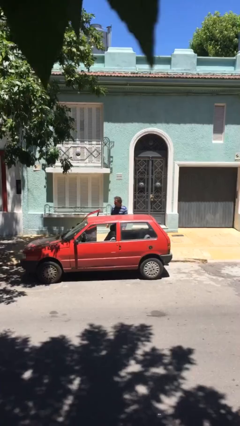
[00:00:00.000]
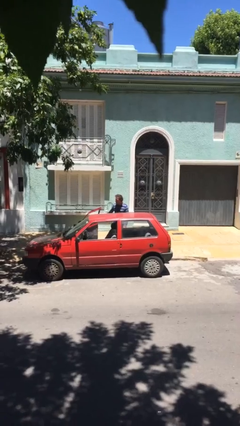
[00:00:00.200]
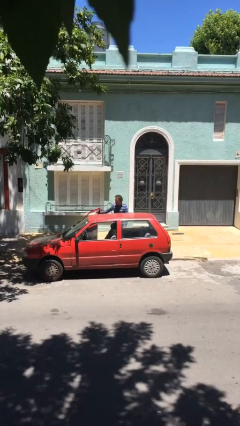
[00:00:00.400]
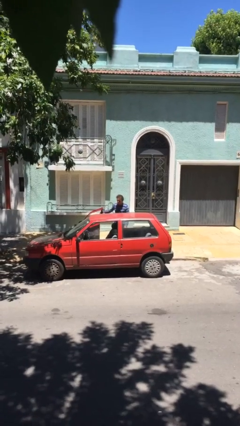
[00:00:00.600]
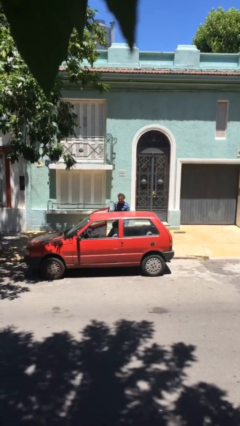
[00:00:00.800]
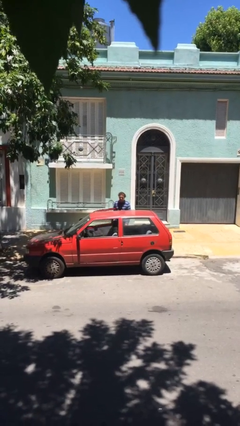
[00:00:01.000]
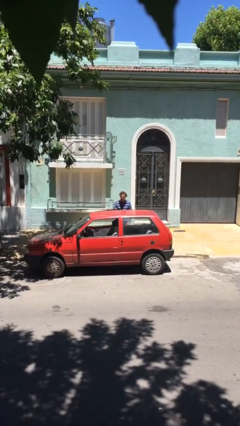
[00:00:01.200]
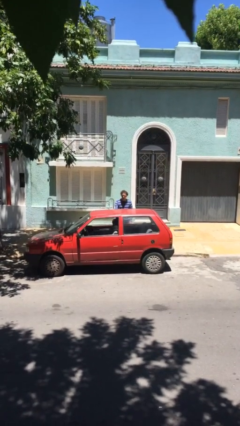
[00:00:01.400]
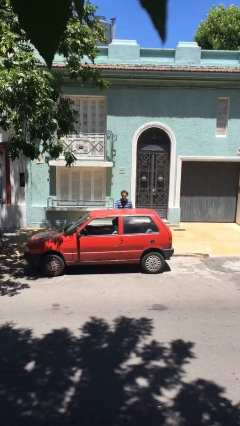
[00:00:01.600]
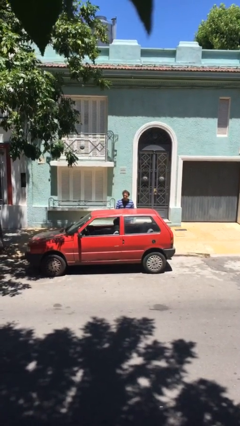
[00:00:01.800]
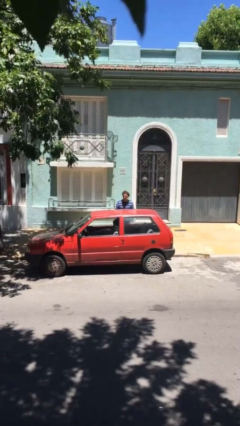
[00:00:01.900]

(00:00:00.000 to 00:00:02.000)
person closes car door

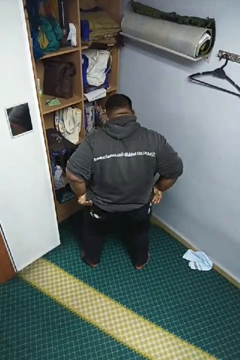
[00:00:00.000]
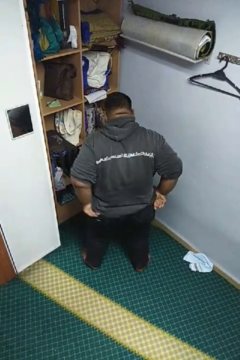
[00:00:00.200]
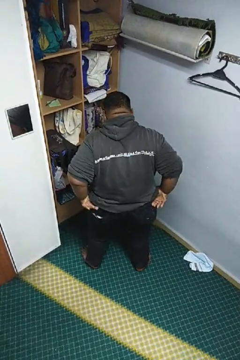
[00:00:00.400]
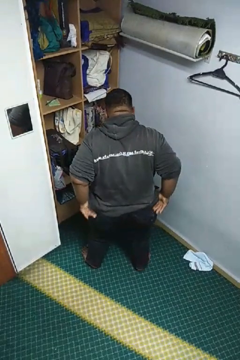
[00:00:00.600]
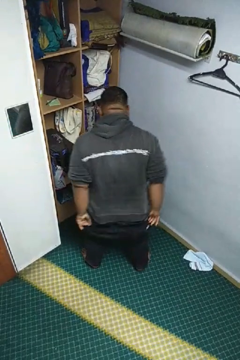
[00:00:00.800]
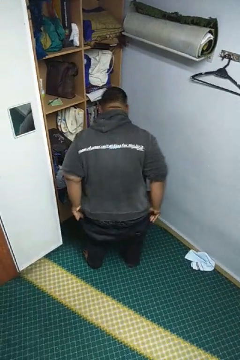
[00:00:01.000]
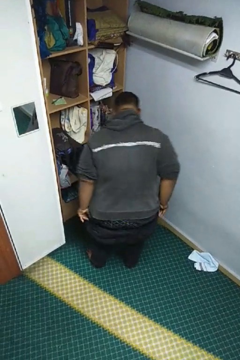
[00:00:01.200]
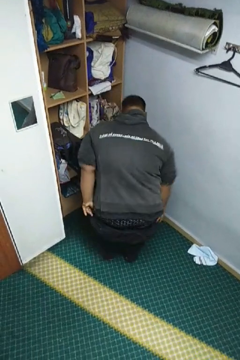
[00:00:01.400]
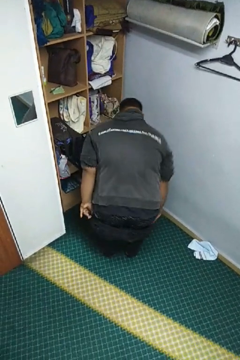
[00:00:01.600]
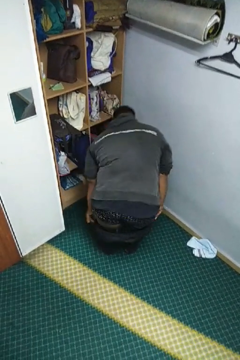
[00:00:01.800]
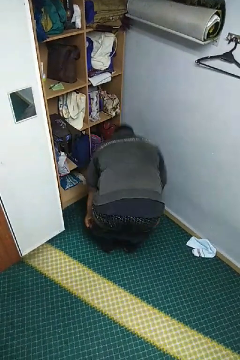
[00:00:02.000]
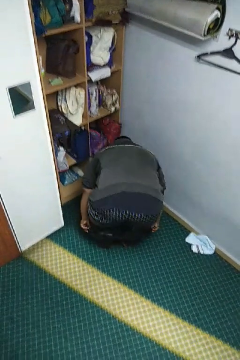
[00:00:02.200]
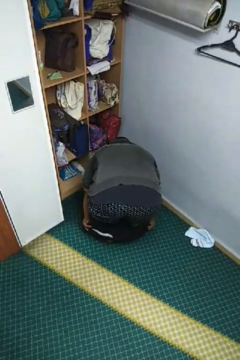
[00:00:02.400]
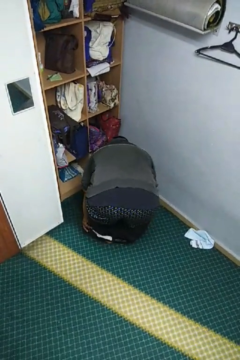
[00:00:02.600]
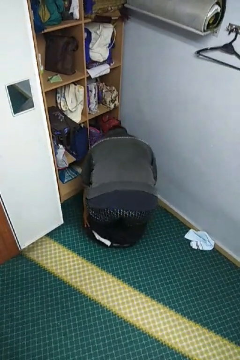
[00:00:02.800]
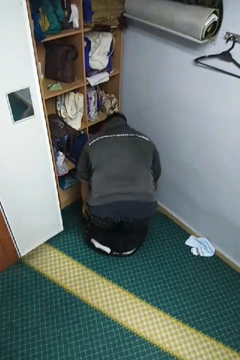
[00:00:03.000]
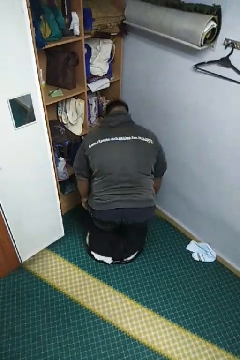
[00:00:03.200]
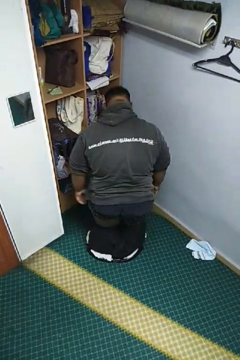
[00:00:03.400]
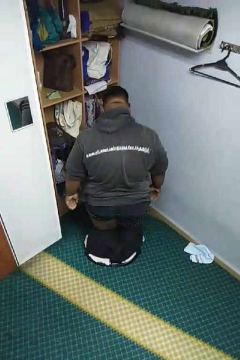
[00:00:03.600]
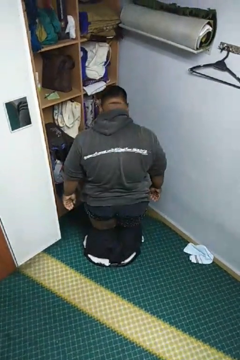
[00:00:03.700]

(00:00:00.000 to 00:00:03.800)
person takes off pants

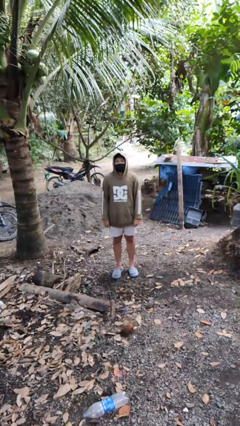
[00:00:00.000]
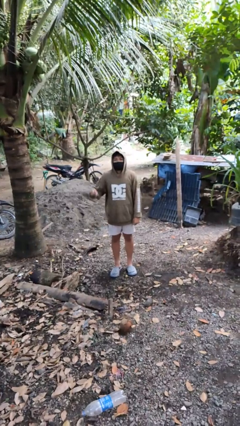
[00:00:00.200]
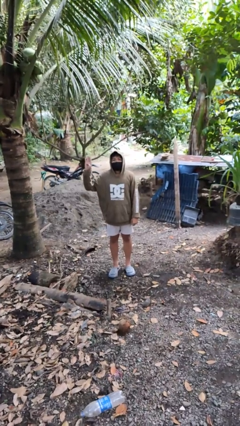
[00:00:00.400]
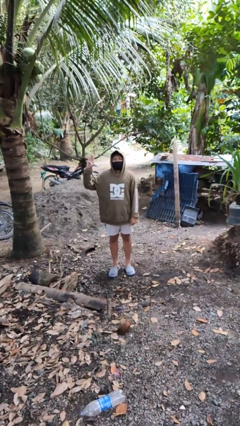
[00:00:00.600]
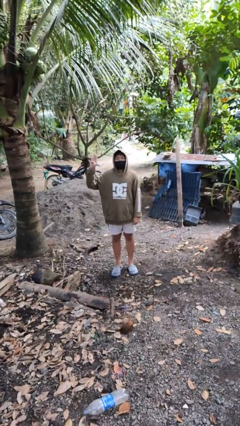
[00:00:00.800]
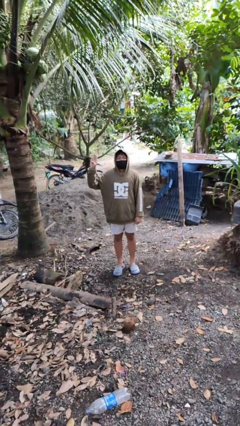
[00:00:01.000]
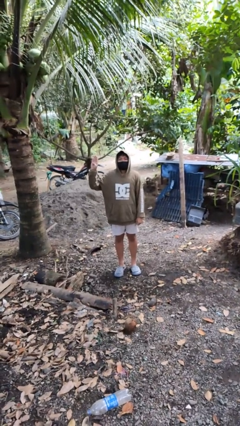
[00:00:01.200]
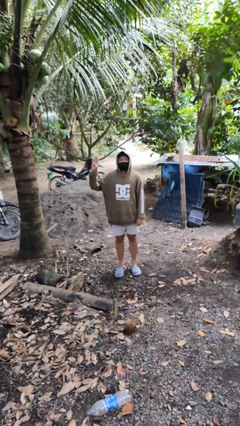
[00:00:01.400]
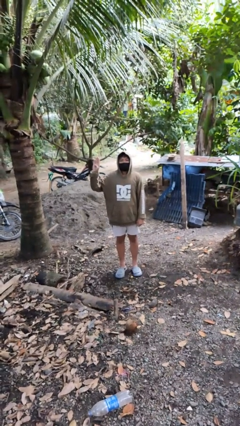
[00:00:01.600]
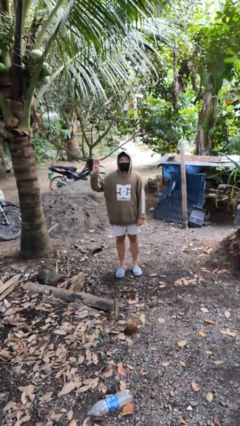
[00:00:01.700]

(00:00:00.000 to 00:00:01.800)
person gestures number four

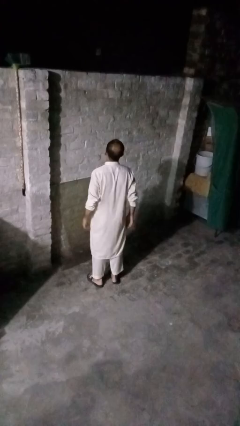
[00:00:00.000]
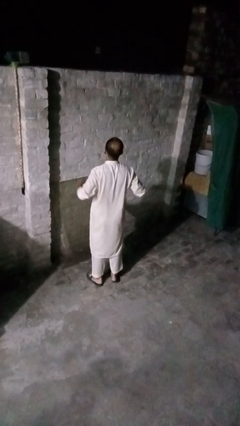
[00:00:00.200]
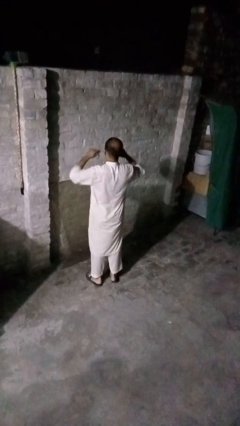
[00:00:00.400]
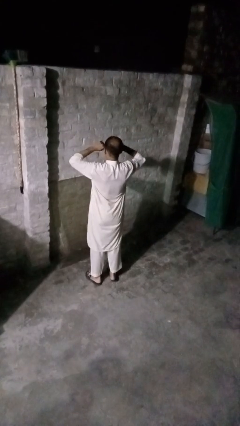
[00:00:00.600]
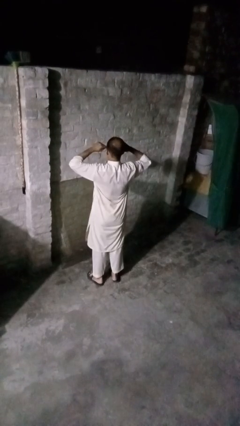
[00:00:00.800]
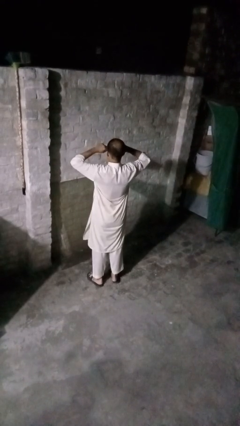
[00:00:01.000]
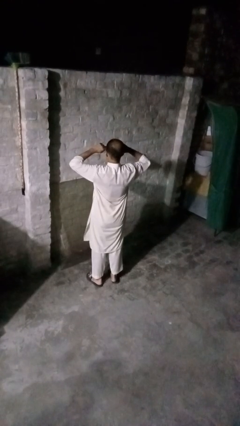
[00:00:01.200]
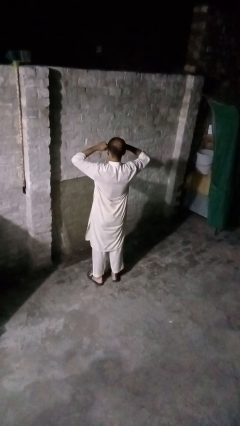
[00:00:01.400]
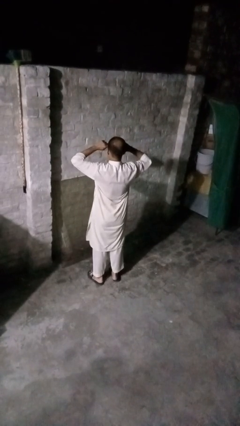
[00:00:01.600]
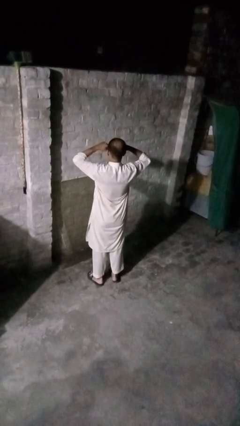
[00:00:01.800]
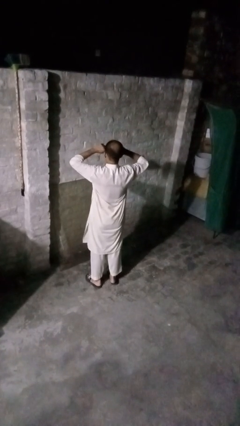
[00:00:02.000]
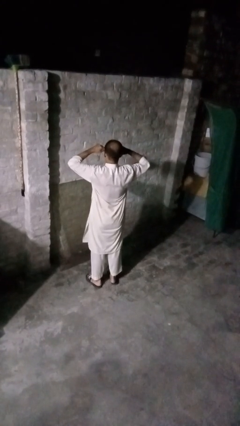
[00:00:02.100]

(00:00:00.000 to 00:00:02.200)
person rubs eyes

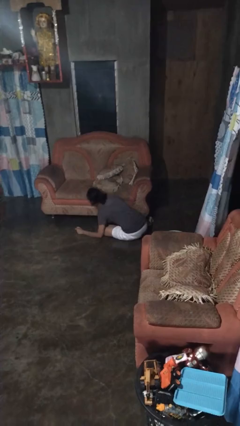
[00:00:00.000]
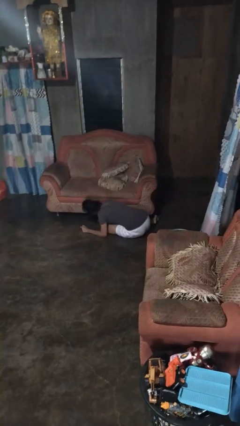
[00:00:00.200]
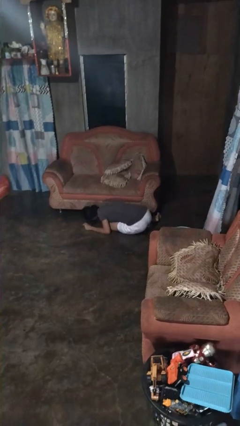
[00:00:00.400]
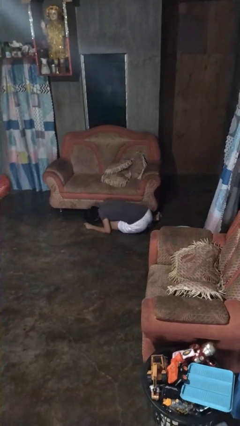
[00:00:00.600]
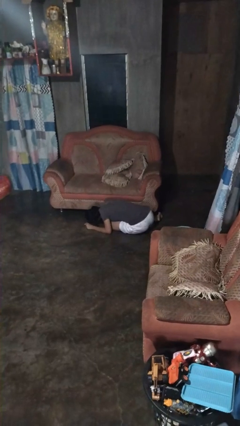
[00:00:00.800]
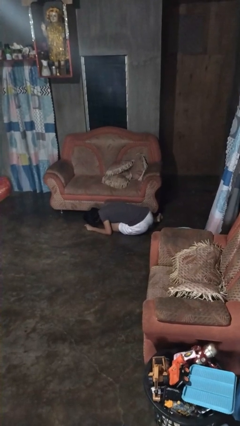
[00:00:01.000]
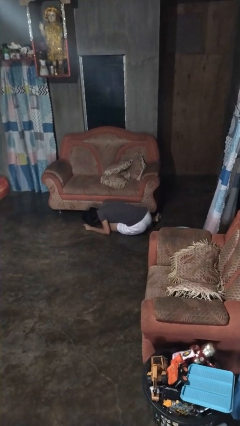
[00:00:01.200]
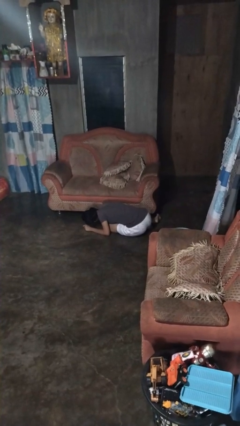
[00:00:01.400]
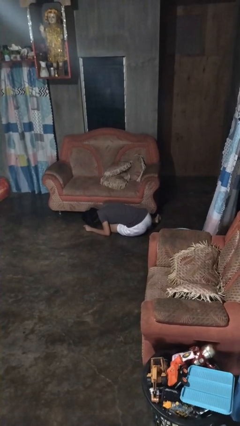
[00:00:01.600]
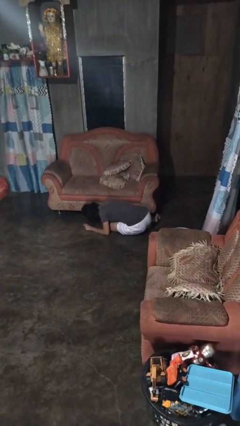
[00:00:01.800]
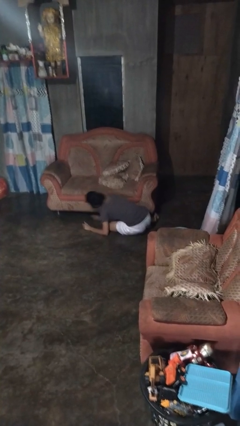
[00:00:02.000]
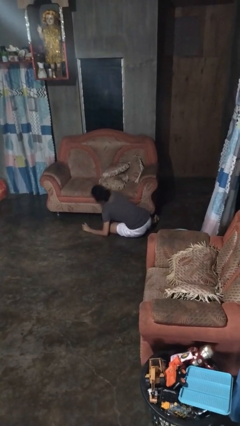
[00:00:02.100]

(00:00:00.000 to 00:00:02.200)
person searches under couch

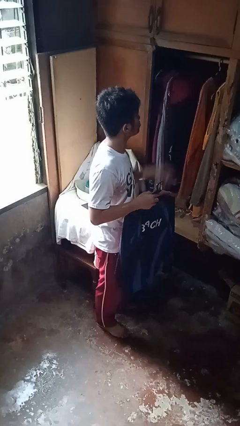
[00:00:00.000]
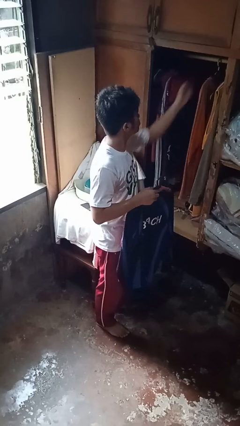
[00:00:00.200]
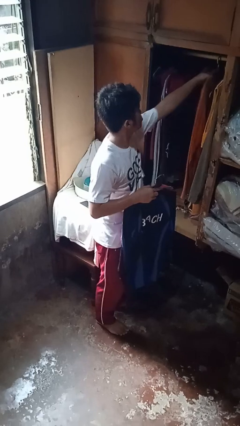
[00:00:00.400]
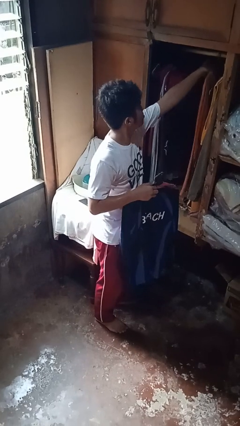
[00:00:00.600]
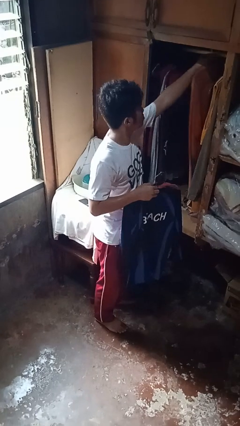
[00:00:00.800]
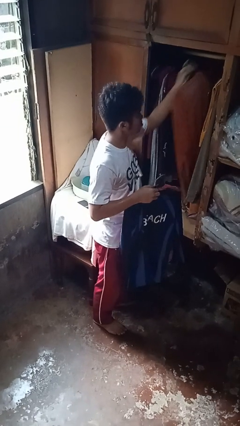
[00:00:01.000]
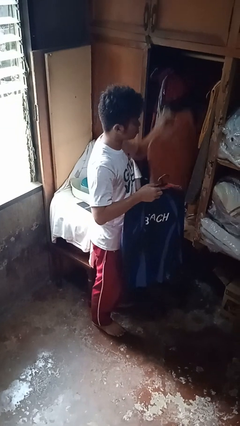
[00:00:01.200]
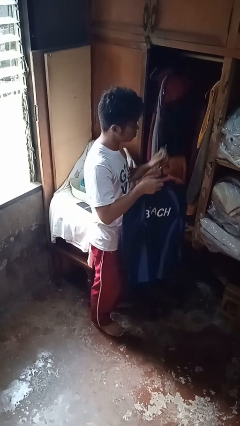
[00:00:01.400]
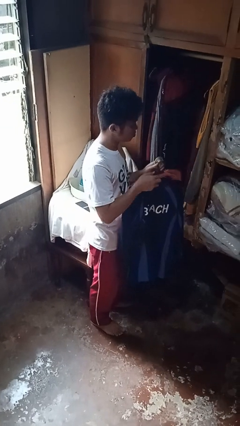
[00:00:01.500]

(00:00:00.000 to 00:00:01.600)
person takes clothes from closet

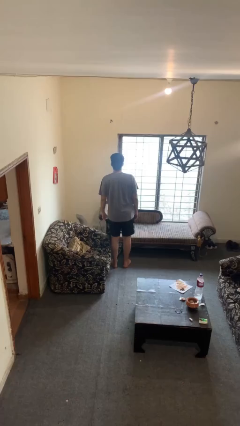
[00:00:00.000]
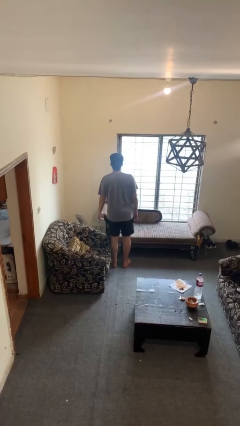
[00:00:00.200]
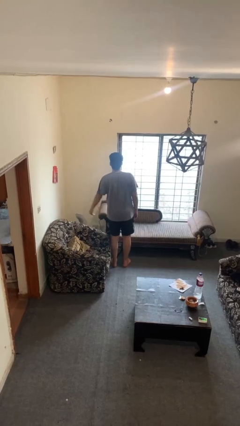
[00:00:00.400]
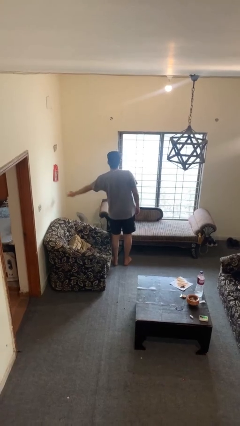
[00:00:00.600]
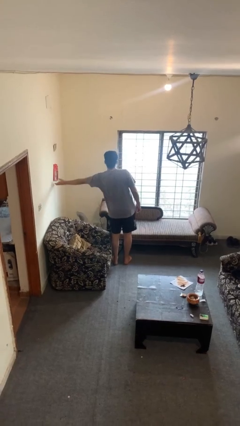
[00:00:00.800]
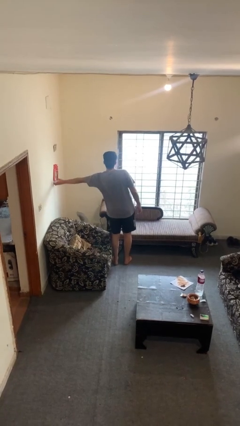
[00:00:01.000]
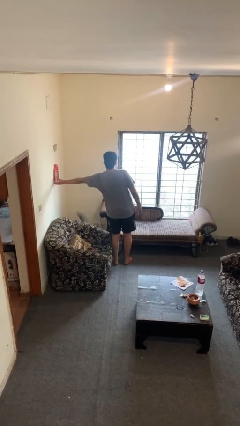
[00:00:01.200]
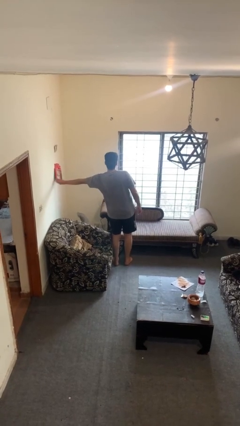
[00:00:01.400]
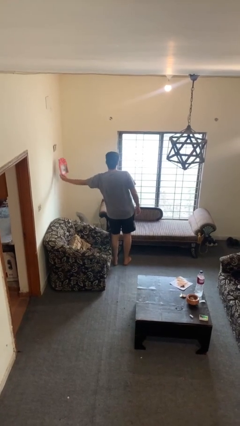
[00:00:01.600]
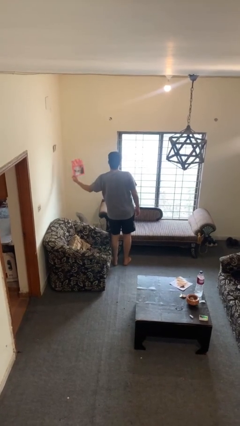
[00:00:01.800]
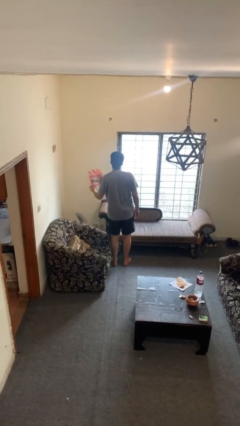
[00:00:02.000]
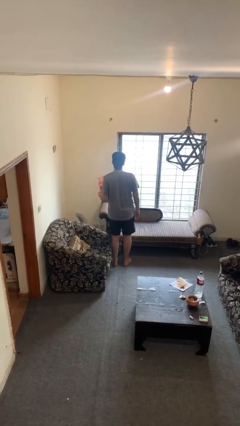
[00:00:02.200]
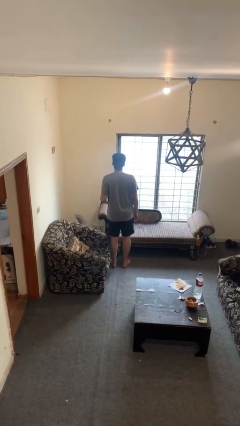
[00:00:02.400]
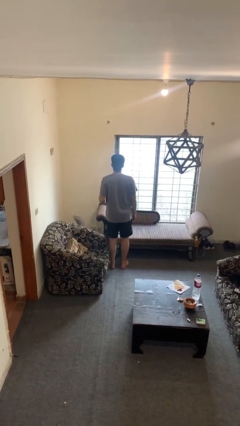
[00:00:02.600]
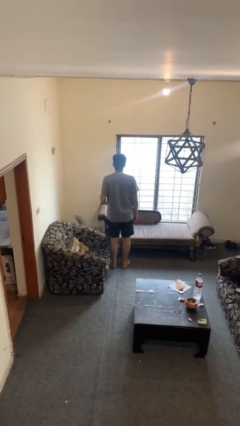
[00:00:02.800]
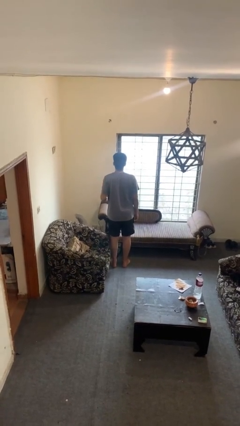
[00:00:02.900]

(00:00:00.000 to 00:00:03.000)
person takes down picture frame

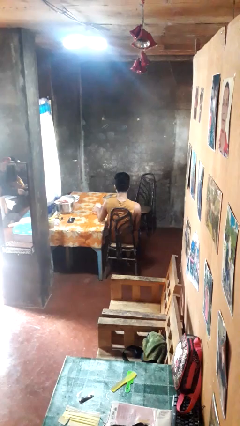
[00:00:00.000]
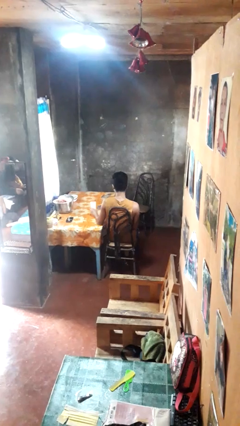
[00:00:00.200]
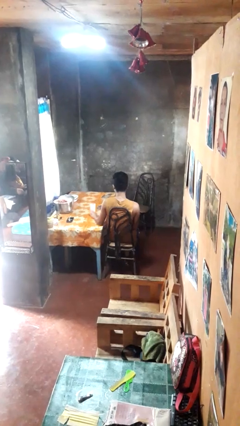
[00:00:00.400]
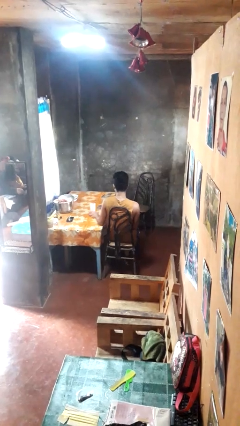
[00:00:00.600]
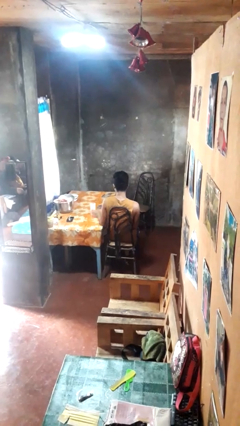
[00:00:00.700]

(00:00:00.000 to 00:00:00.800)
person sets upright glass
